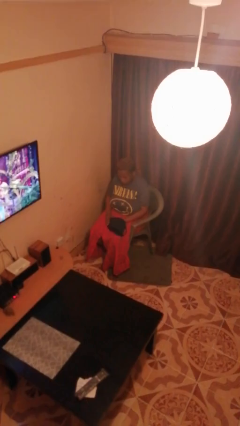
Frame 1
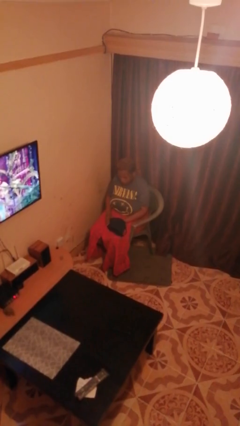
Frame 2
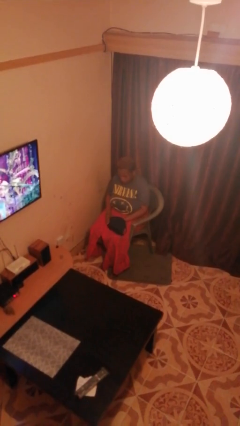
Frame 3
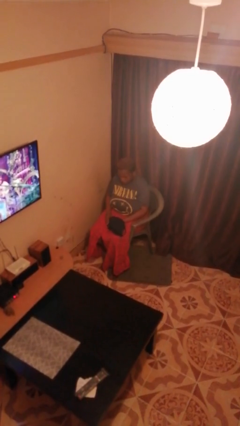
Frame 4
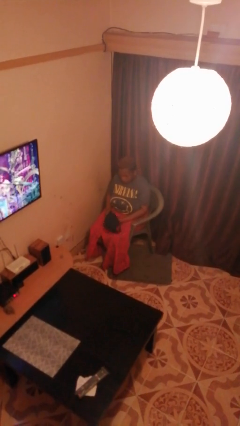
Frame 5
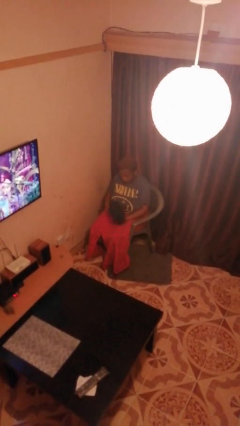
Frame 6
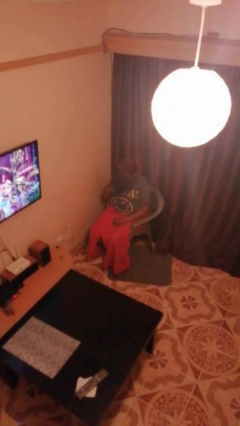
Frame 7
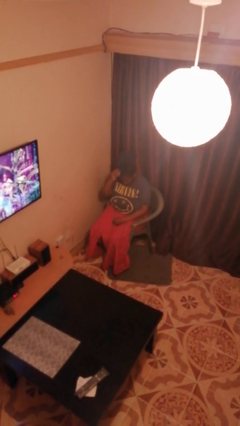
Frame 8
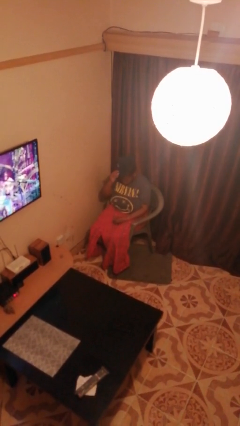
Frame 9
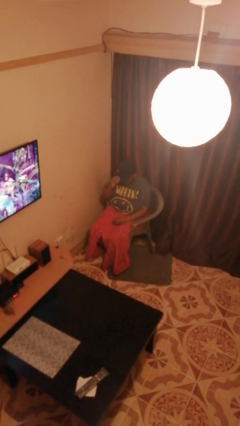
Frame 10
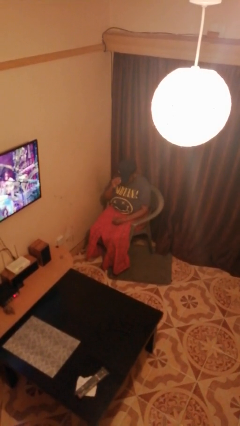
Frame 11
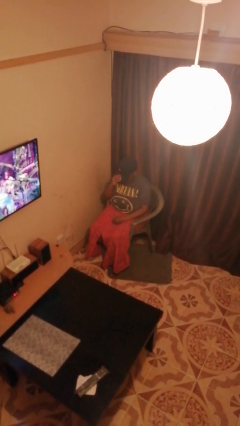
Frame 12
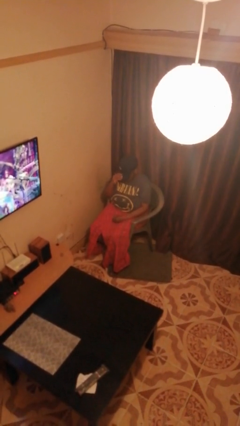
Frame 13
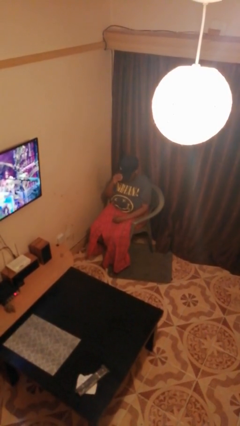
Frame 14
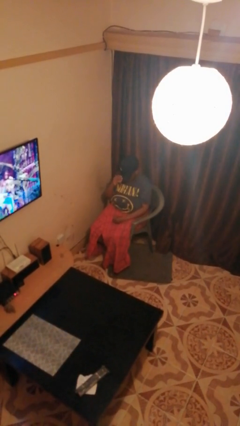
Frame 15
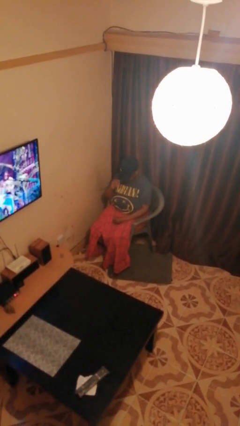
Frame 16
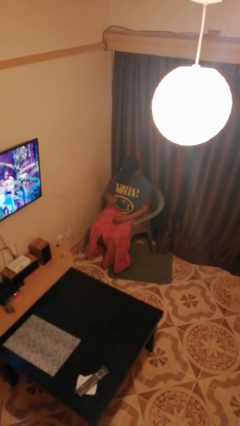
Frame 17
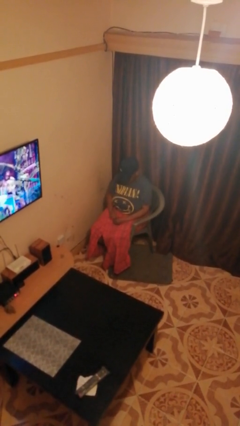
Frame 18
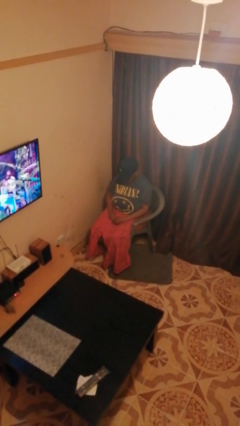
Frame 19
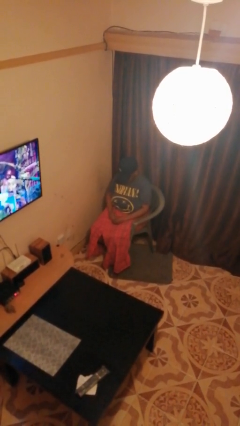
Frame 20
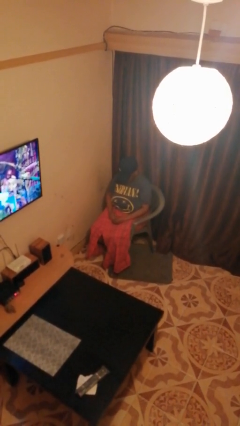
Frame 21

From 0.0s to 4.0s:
person puts on hat

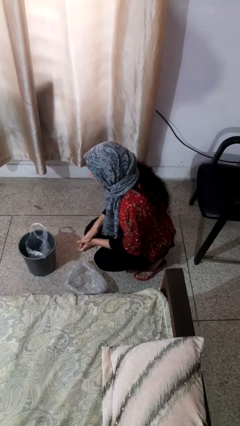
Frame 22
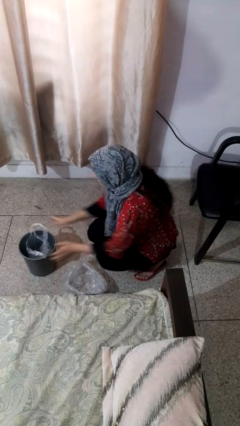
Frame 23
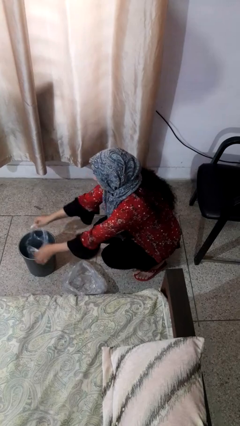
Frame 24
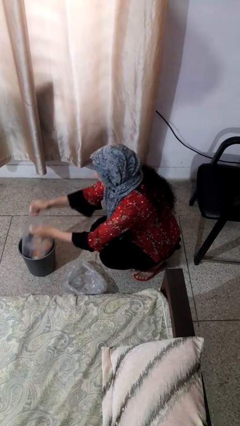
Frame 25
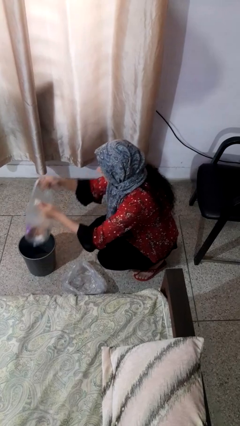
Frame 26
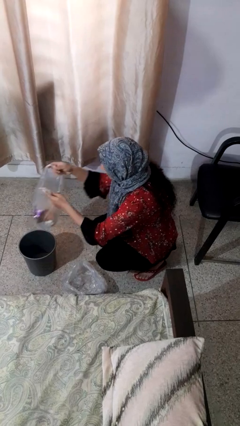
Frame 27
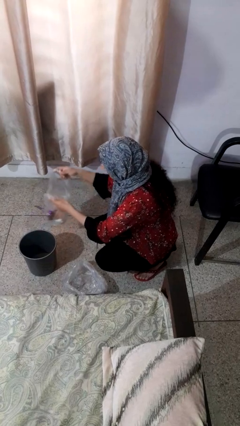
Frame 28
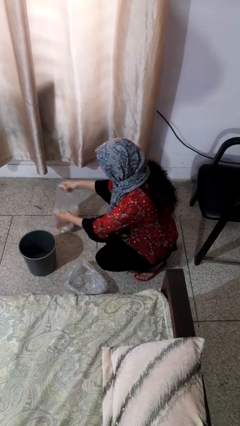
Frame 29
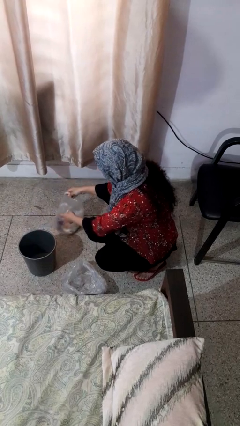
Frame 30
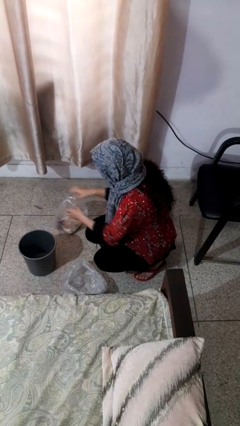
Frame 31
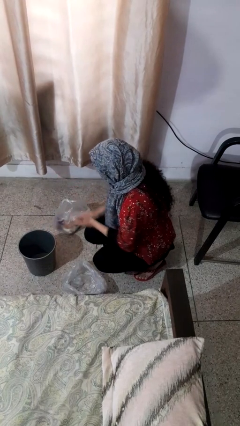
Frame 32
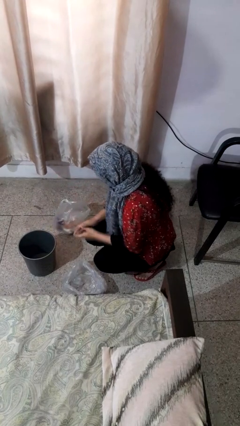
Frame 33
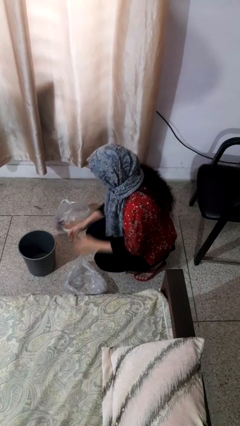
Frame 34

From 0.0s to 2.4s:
person removes trashbag from trashcan

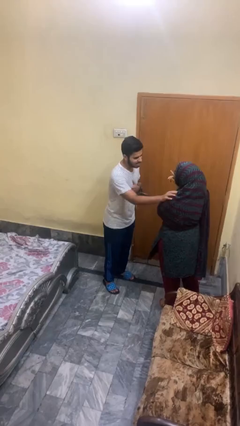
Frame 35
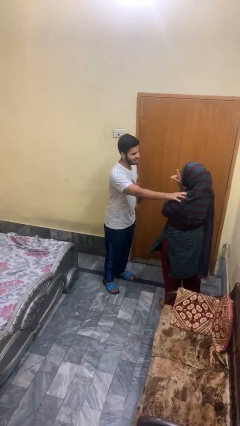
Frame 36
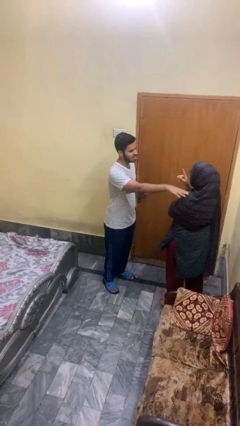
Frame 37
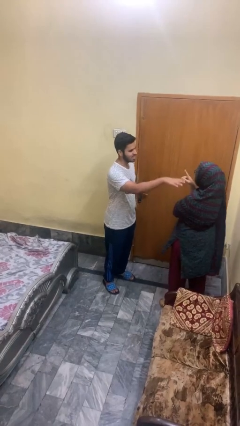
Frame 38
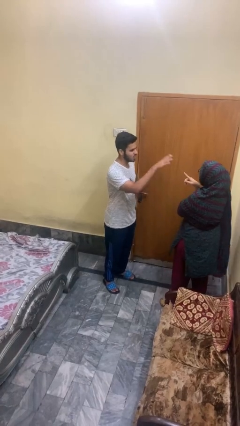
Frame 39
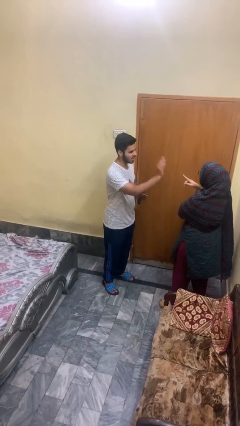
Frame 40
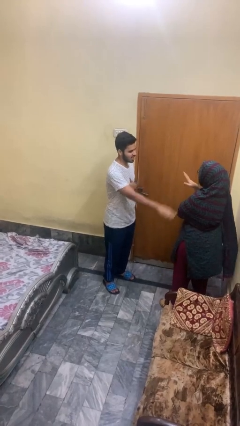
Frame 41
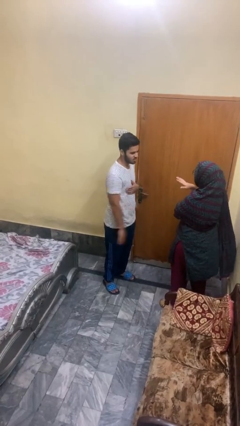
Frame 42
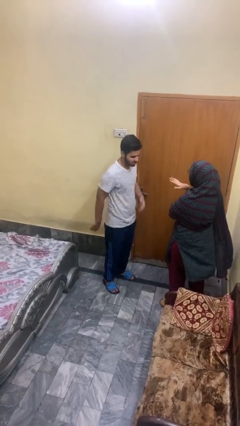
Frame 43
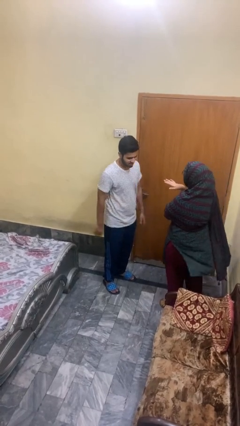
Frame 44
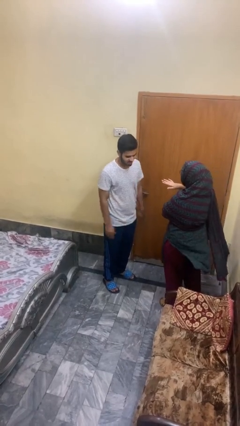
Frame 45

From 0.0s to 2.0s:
person shoves person

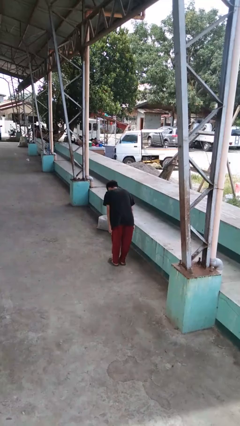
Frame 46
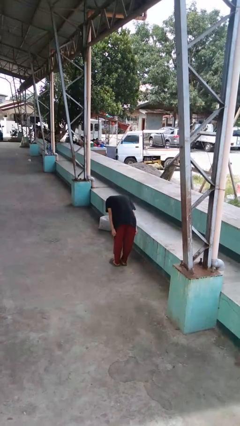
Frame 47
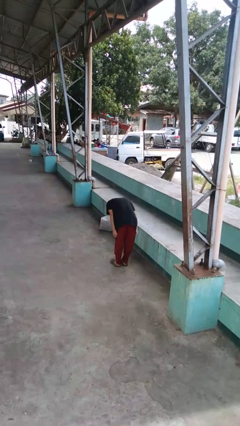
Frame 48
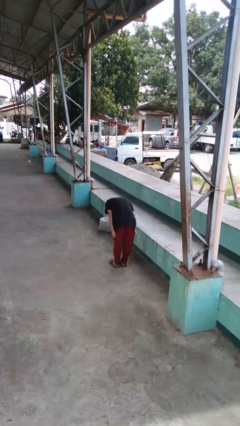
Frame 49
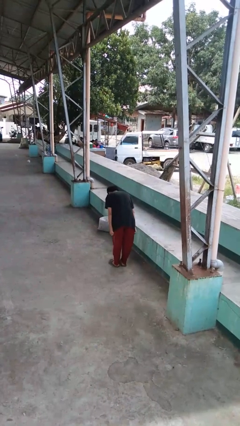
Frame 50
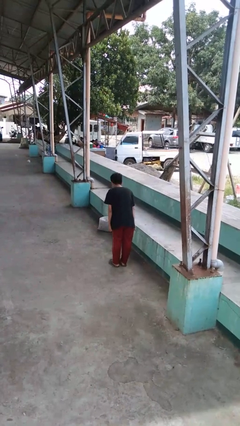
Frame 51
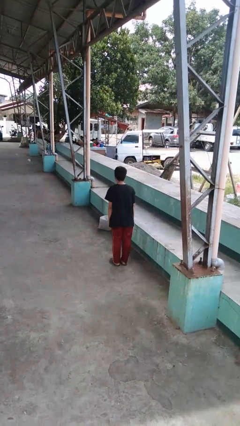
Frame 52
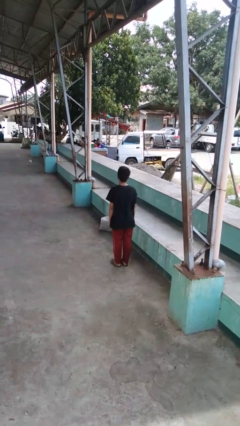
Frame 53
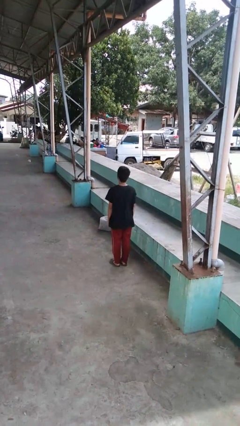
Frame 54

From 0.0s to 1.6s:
person bows

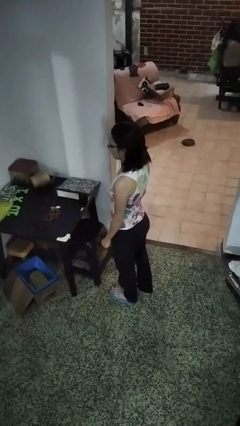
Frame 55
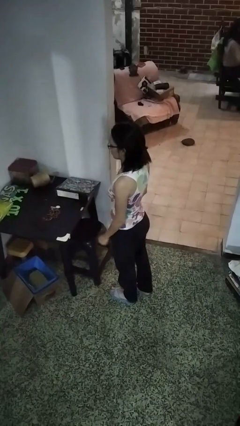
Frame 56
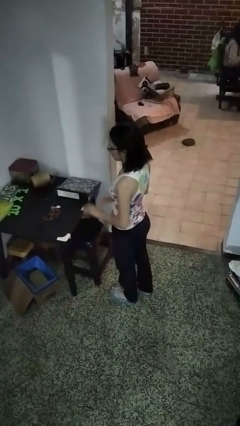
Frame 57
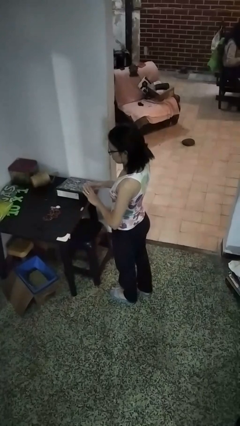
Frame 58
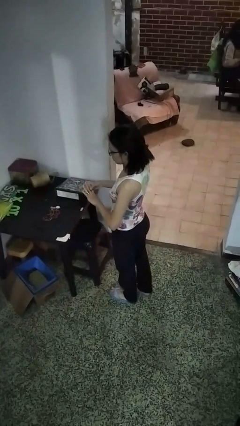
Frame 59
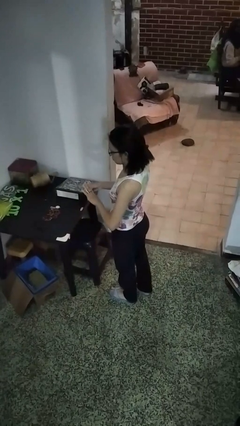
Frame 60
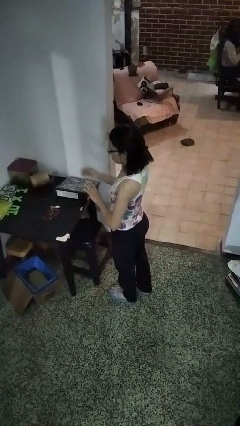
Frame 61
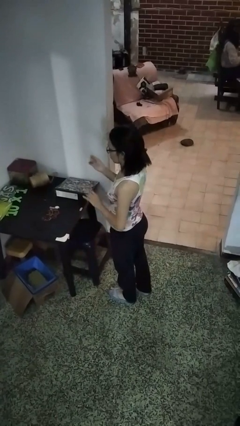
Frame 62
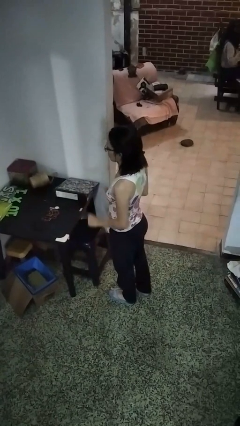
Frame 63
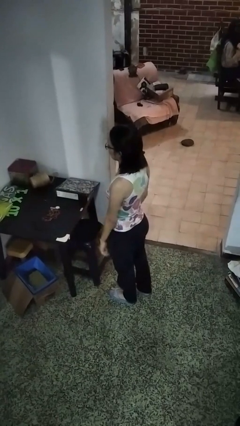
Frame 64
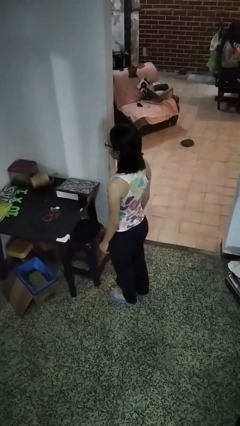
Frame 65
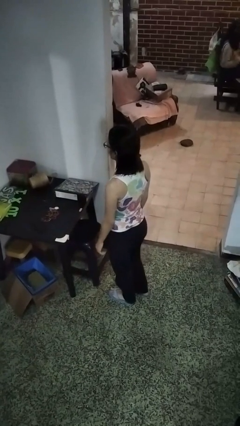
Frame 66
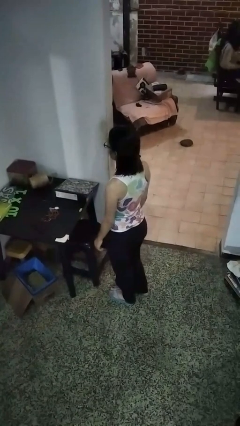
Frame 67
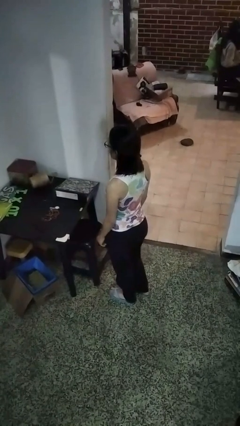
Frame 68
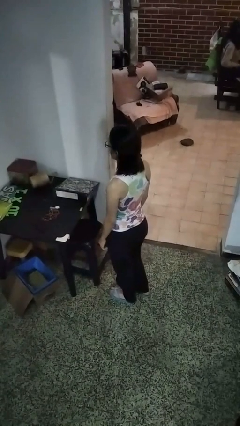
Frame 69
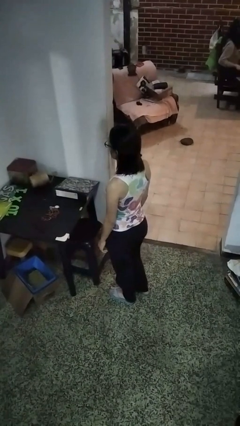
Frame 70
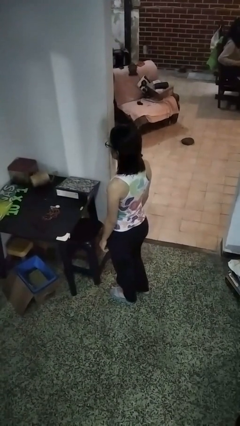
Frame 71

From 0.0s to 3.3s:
person takes off ring

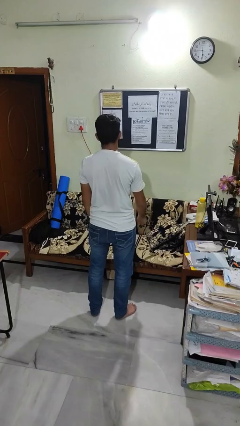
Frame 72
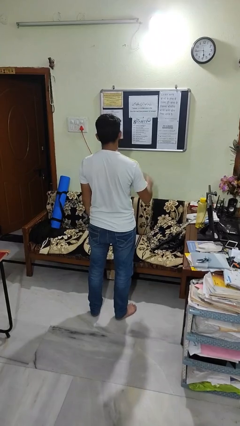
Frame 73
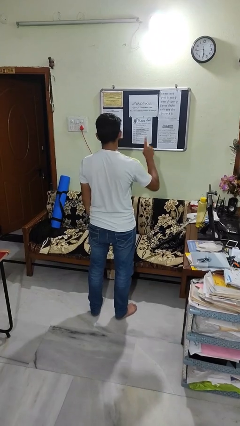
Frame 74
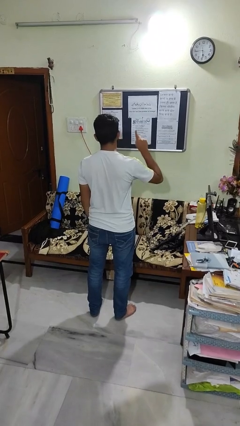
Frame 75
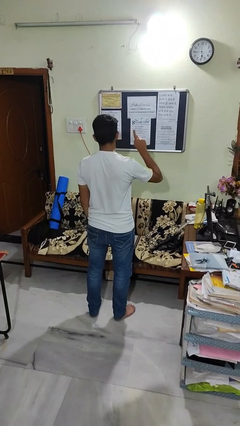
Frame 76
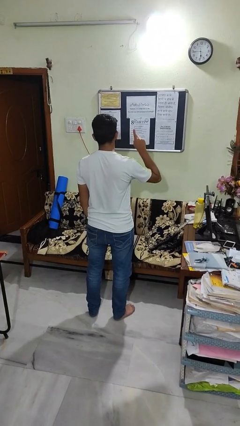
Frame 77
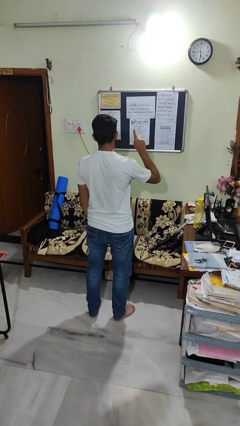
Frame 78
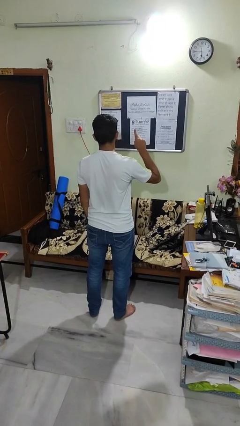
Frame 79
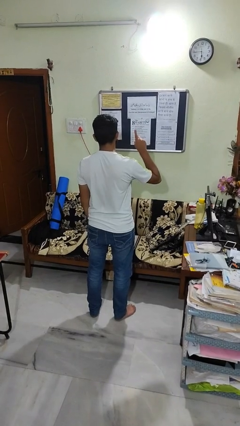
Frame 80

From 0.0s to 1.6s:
person gestures number one

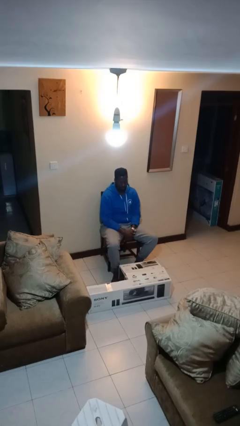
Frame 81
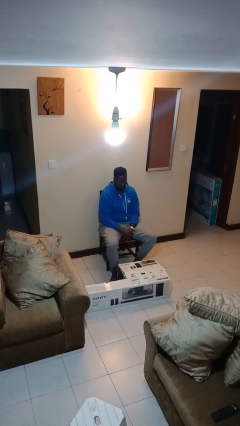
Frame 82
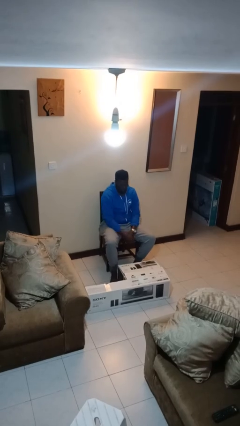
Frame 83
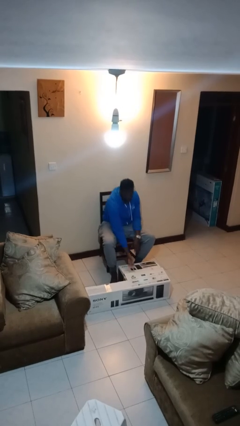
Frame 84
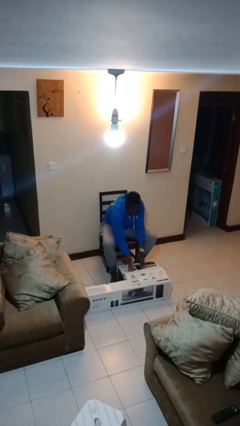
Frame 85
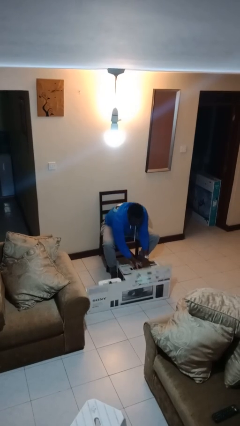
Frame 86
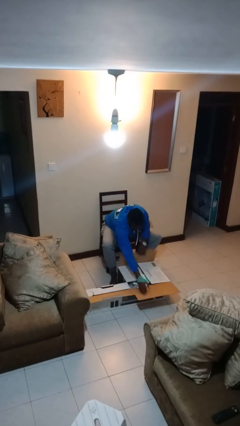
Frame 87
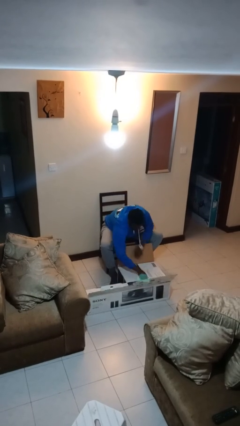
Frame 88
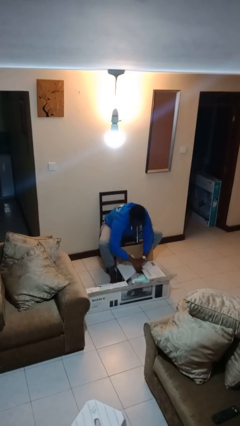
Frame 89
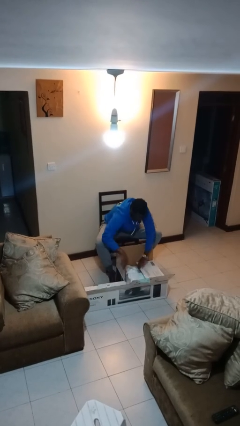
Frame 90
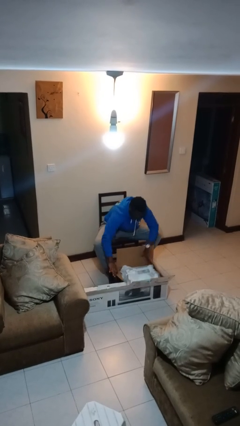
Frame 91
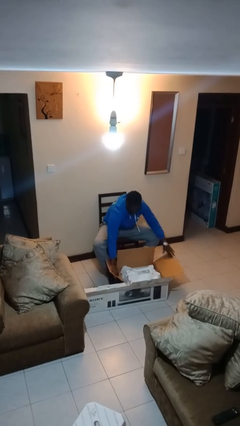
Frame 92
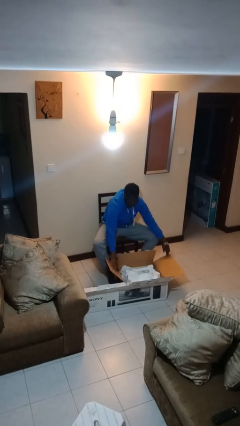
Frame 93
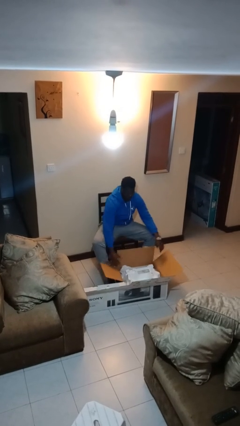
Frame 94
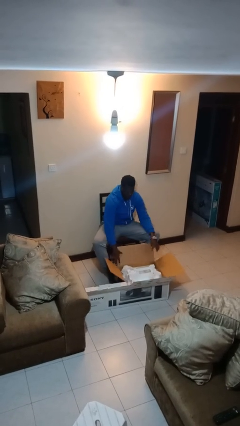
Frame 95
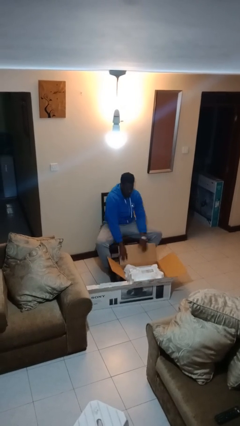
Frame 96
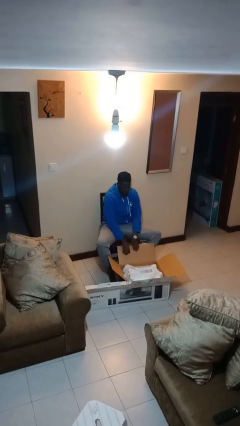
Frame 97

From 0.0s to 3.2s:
person opens box
